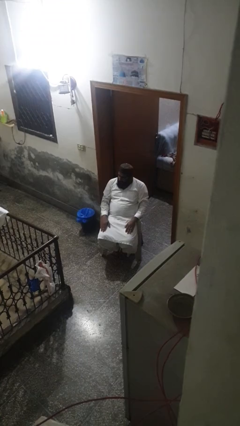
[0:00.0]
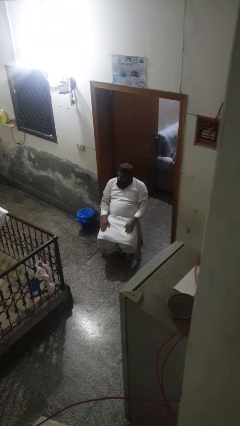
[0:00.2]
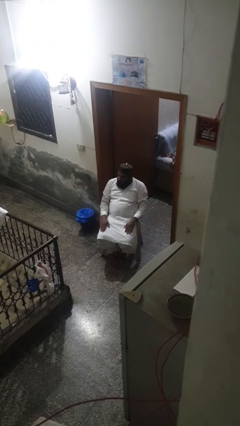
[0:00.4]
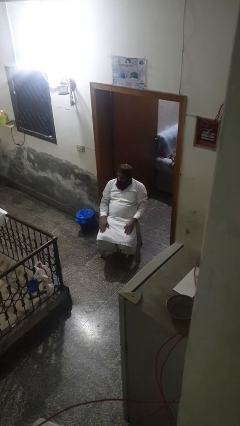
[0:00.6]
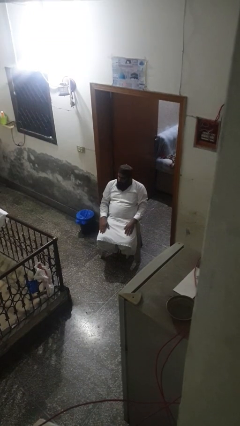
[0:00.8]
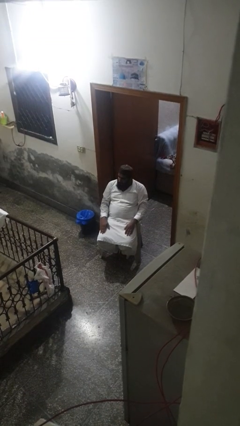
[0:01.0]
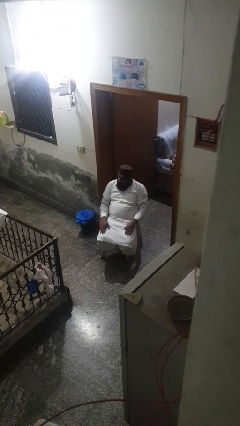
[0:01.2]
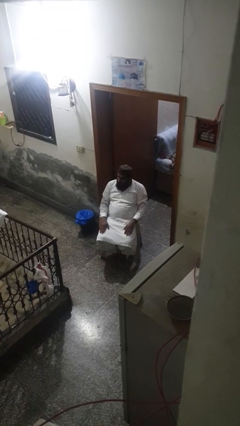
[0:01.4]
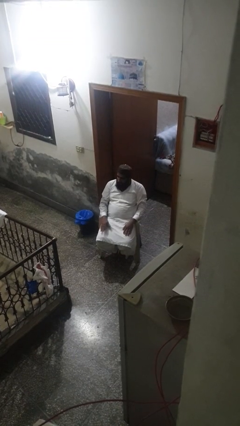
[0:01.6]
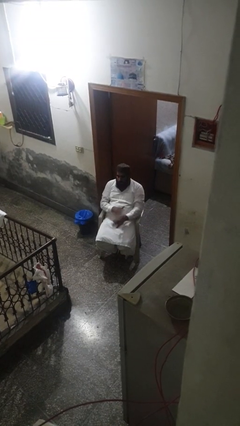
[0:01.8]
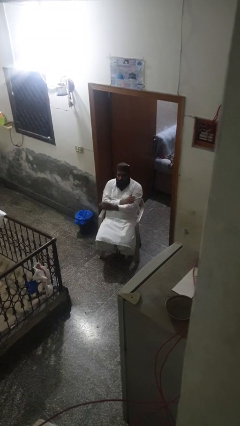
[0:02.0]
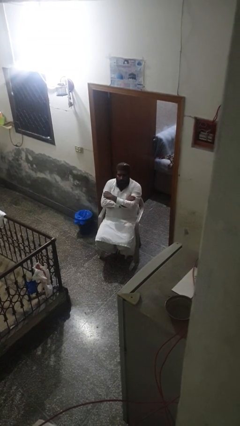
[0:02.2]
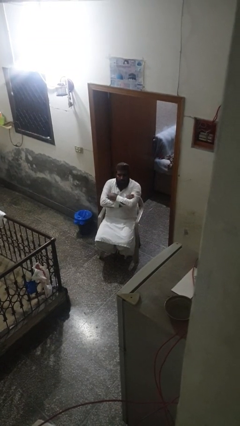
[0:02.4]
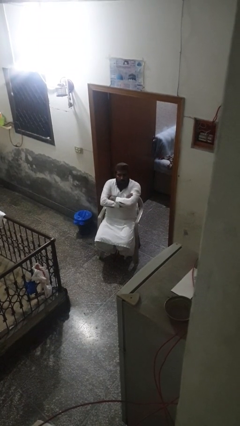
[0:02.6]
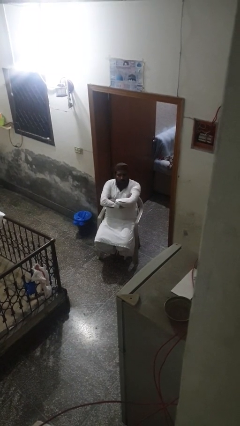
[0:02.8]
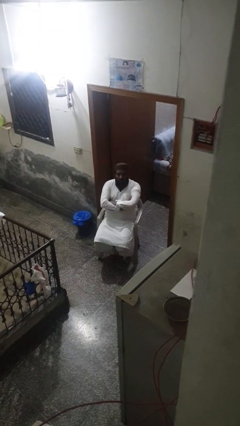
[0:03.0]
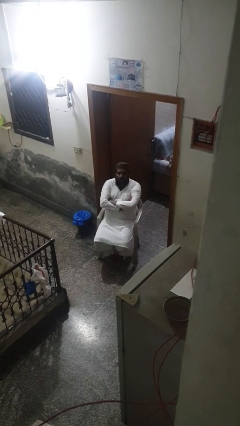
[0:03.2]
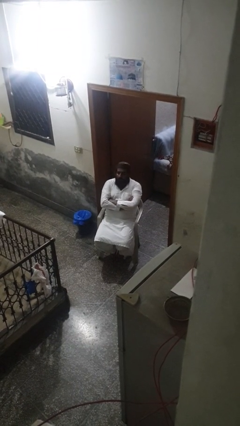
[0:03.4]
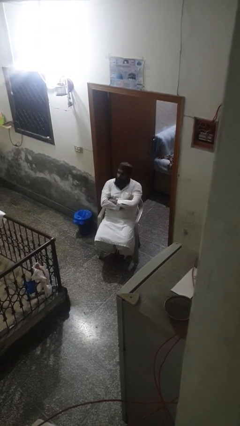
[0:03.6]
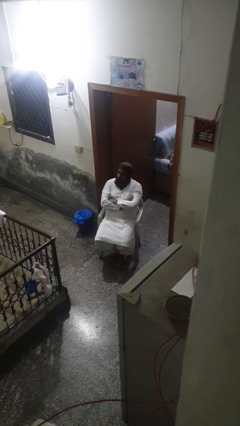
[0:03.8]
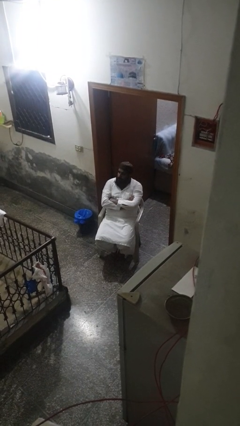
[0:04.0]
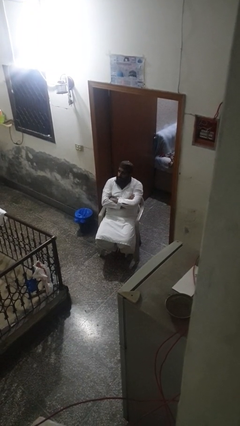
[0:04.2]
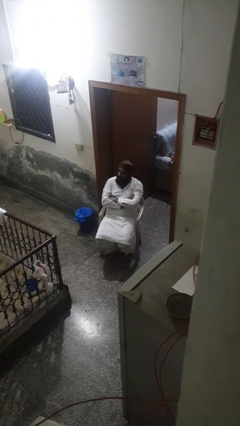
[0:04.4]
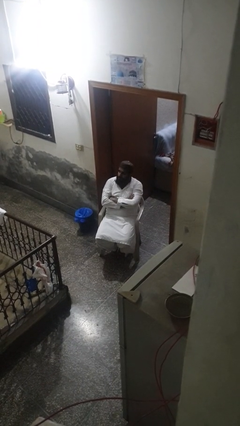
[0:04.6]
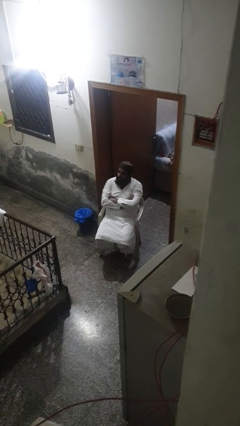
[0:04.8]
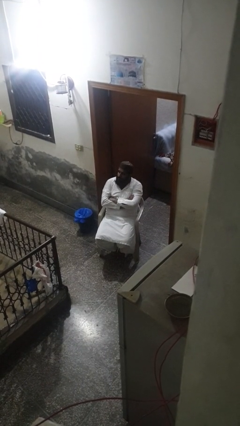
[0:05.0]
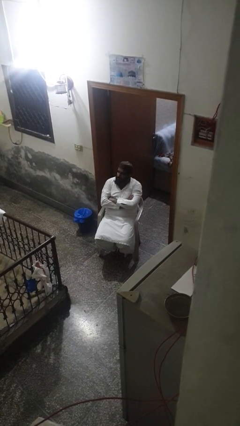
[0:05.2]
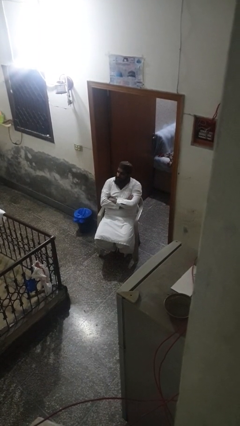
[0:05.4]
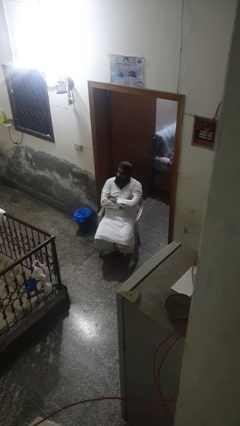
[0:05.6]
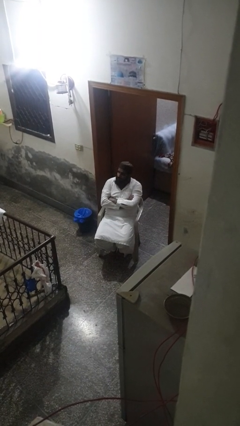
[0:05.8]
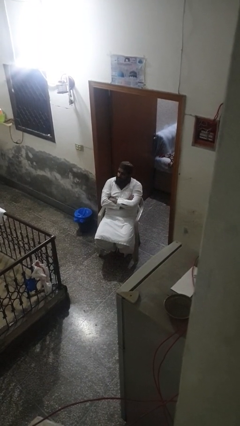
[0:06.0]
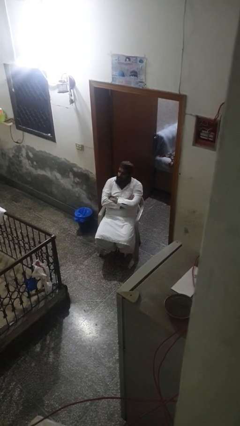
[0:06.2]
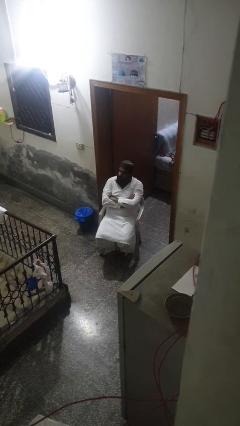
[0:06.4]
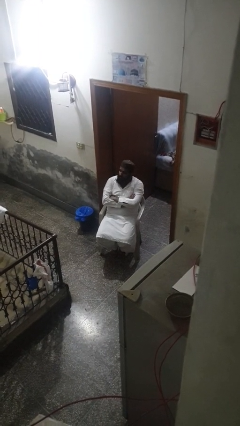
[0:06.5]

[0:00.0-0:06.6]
person crosses arms

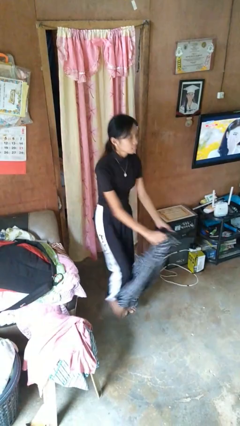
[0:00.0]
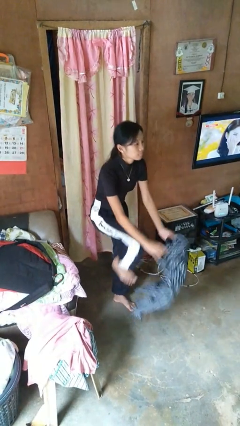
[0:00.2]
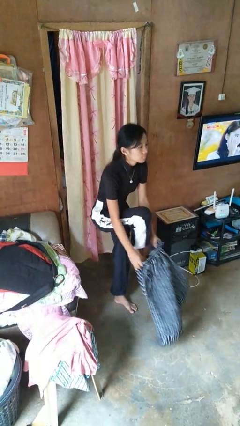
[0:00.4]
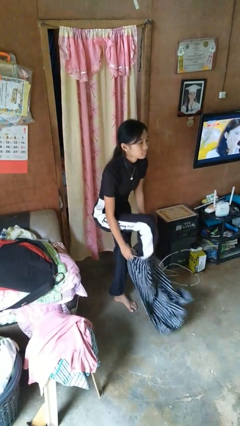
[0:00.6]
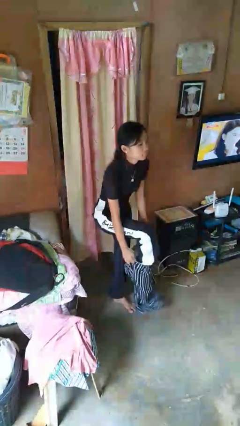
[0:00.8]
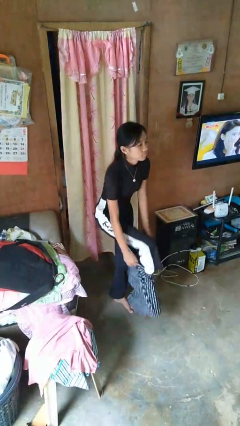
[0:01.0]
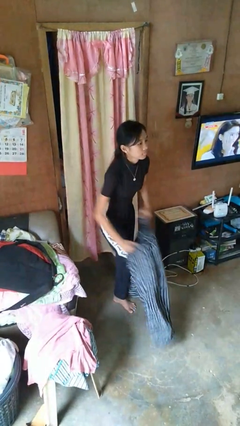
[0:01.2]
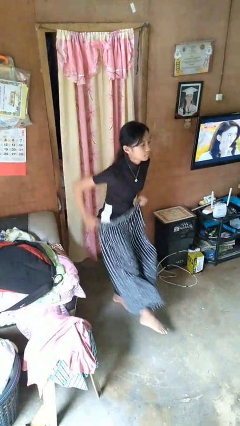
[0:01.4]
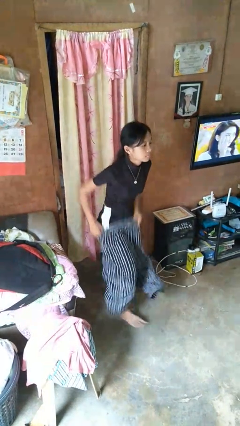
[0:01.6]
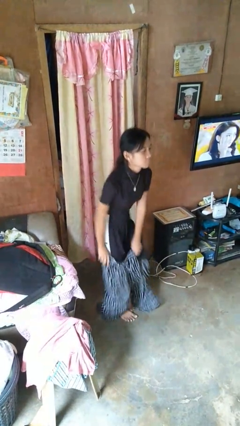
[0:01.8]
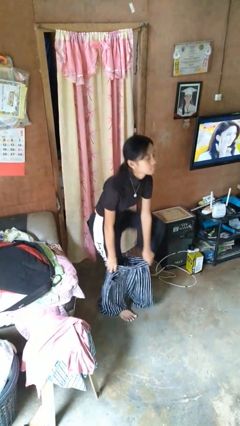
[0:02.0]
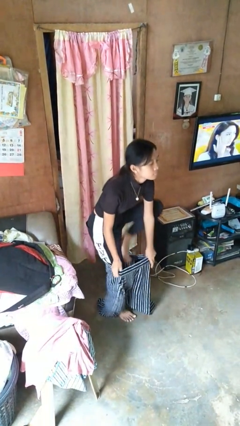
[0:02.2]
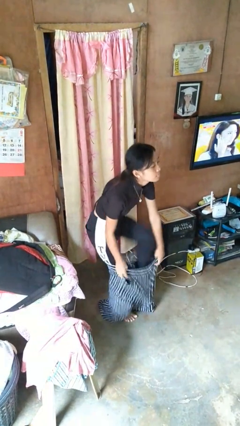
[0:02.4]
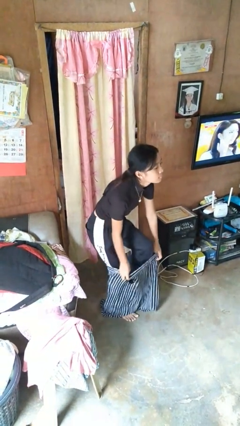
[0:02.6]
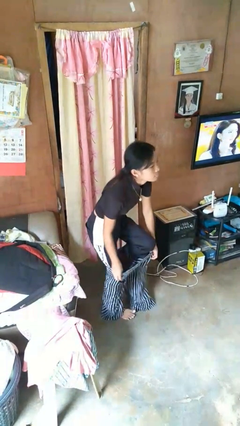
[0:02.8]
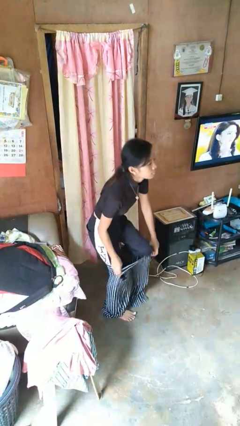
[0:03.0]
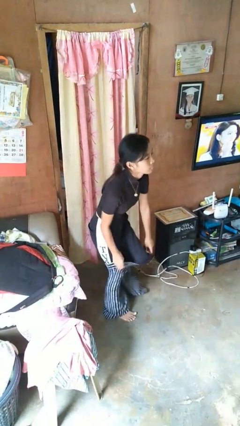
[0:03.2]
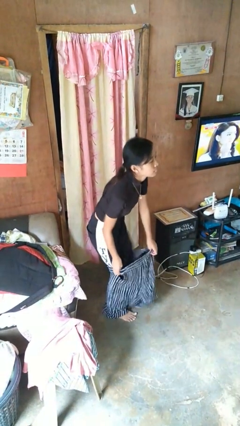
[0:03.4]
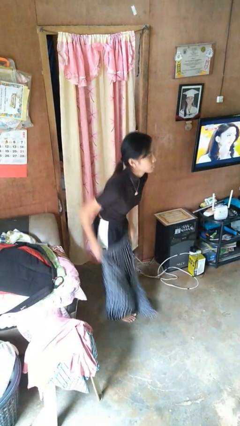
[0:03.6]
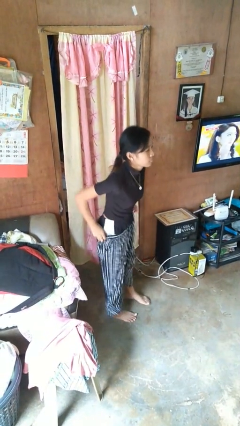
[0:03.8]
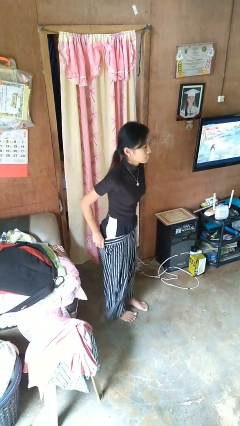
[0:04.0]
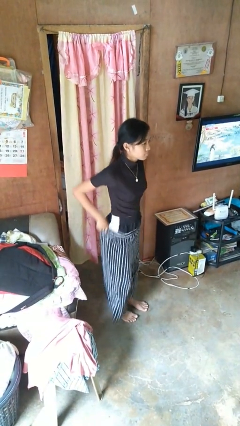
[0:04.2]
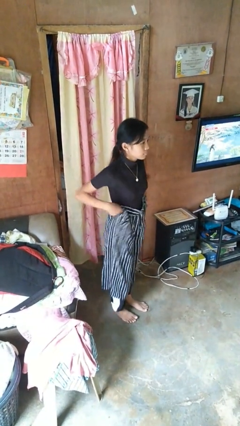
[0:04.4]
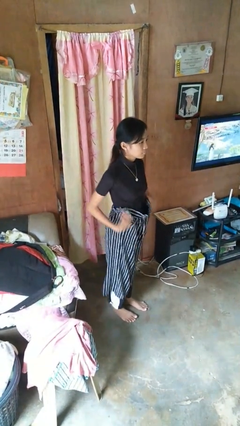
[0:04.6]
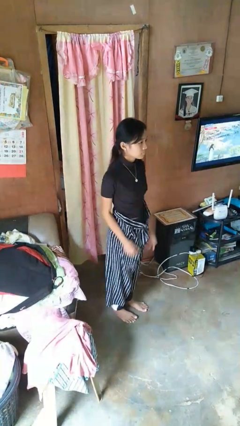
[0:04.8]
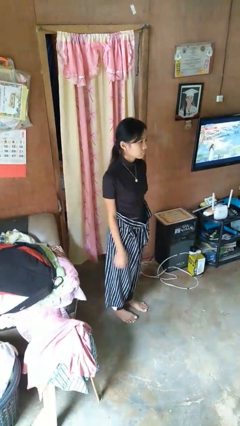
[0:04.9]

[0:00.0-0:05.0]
person puts on pants

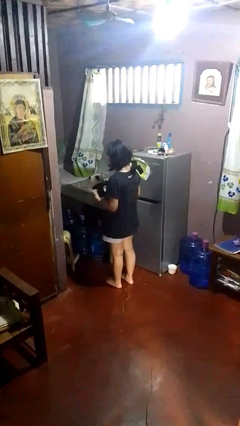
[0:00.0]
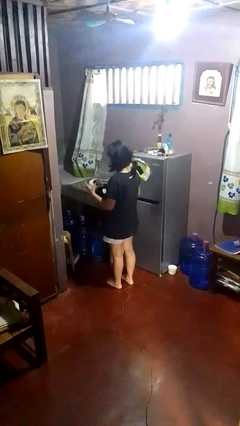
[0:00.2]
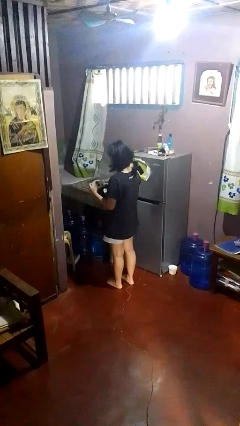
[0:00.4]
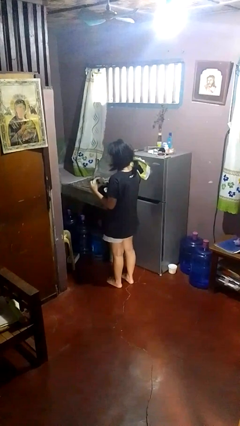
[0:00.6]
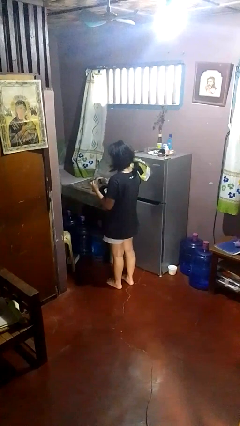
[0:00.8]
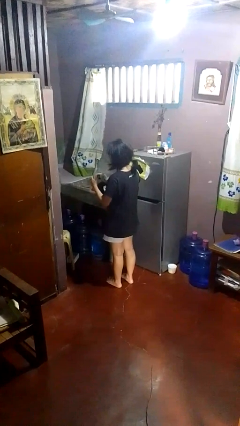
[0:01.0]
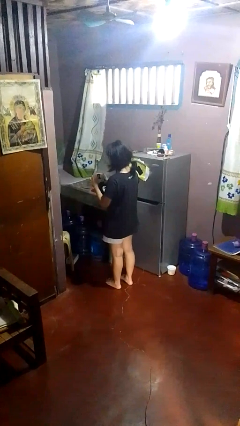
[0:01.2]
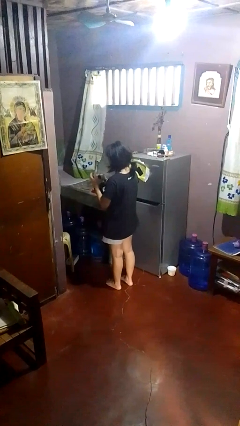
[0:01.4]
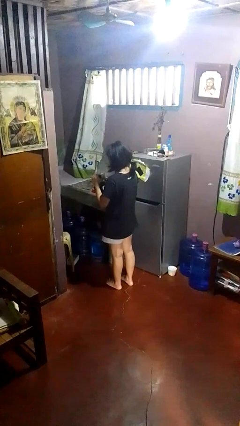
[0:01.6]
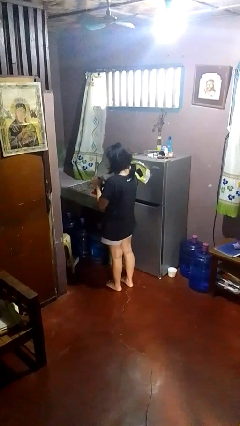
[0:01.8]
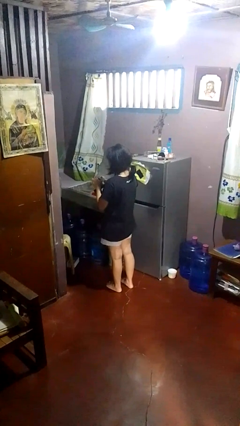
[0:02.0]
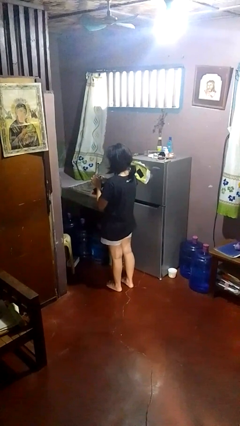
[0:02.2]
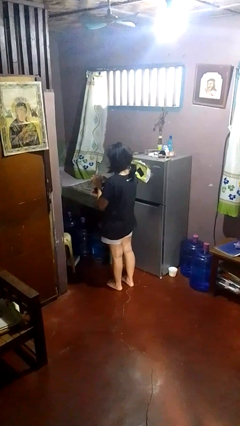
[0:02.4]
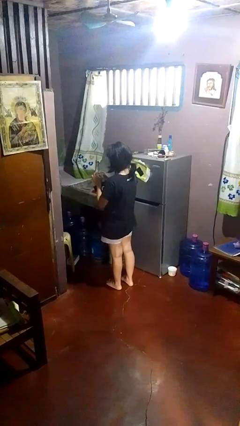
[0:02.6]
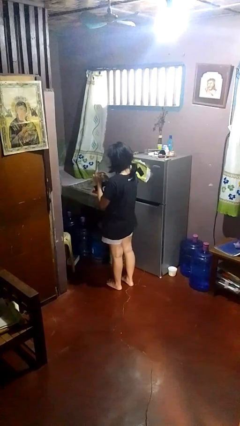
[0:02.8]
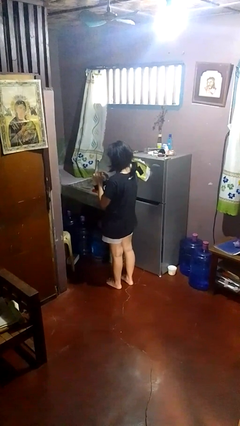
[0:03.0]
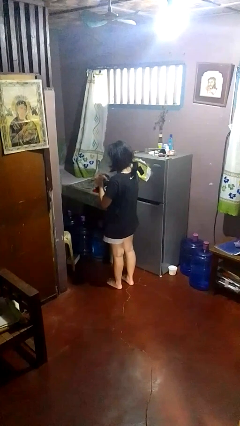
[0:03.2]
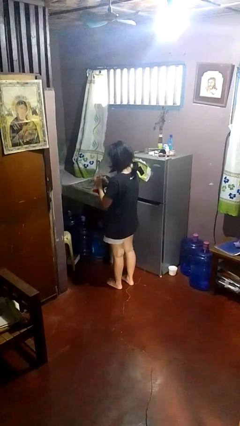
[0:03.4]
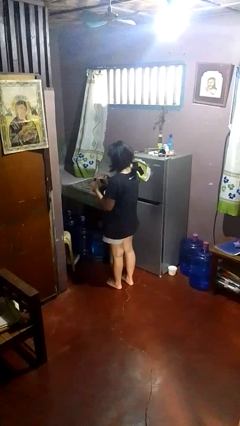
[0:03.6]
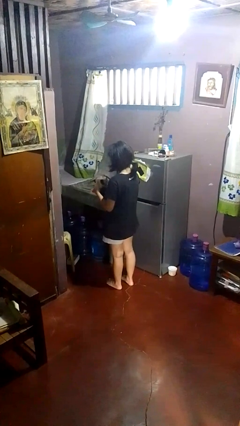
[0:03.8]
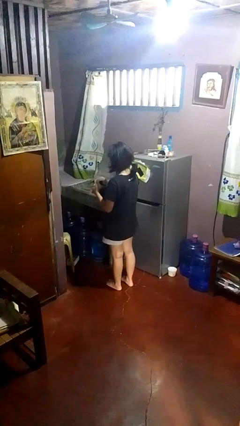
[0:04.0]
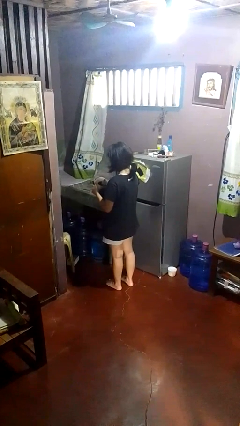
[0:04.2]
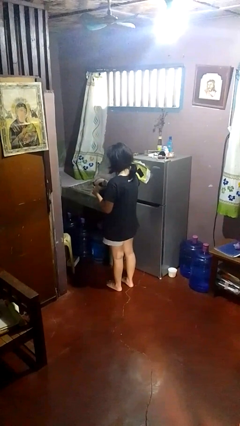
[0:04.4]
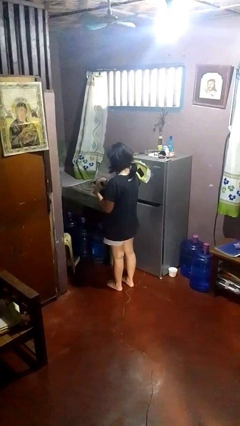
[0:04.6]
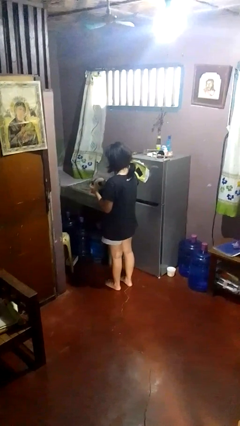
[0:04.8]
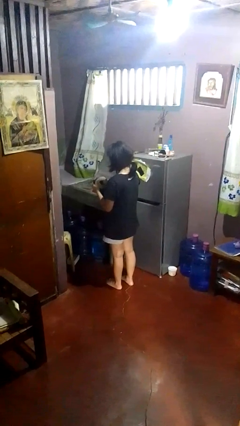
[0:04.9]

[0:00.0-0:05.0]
person squeezes object

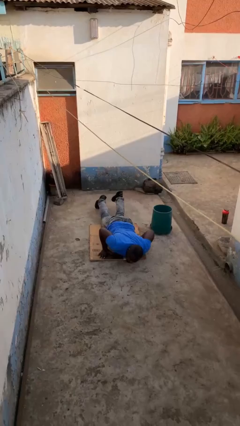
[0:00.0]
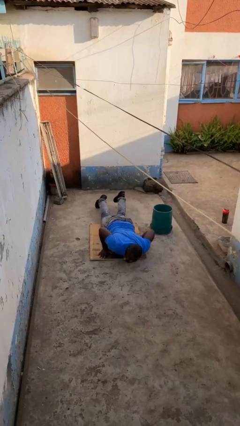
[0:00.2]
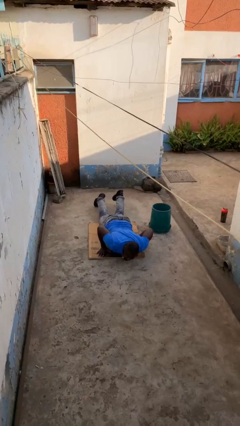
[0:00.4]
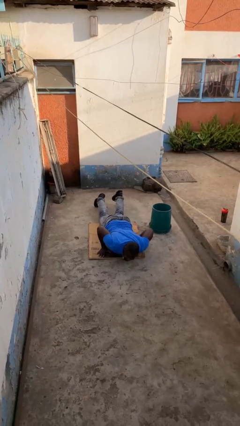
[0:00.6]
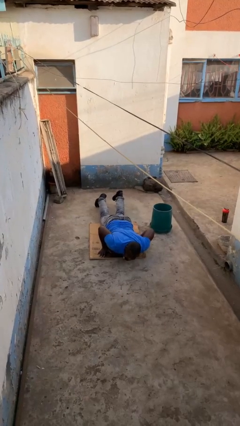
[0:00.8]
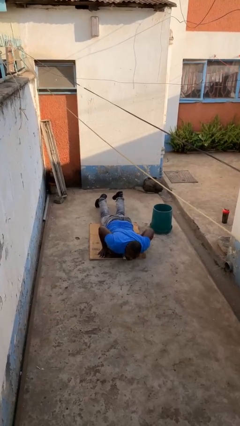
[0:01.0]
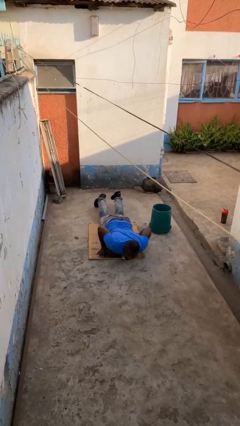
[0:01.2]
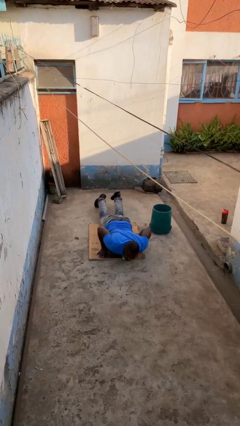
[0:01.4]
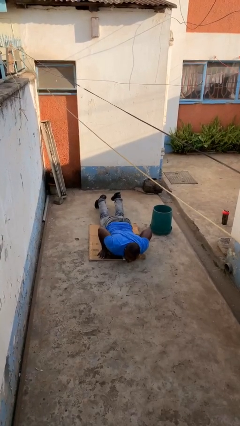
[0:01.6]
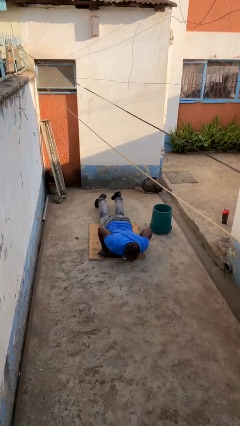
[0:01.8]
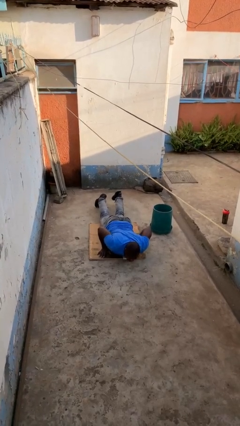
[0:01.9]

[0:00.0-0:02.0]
person lies down on floor
